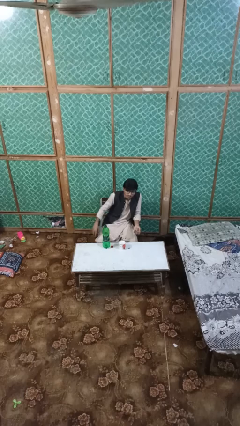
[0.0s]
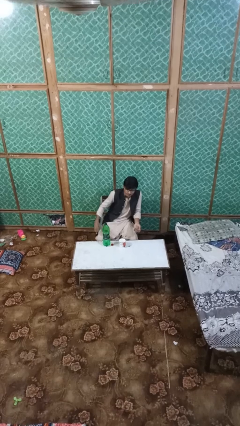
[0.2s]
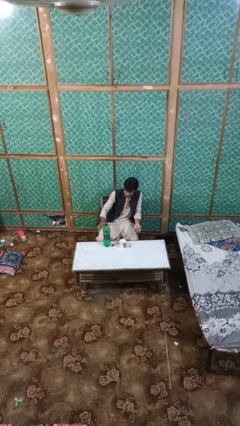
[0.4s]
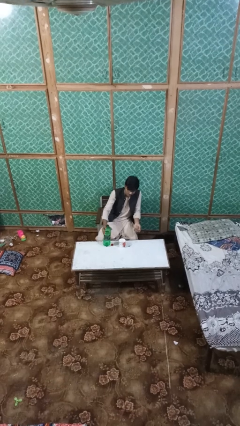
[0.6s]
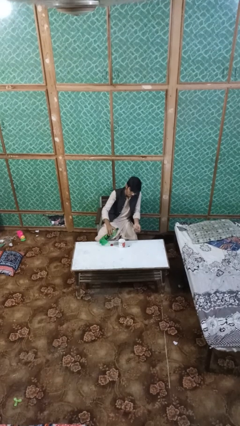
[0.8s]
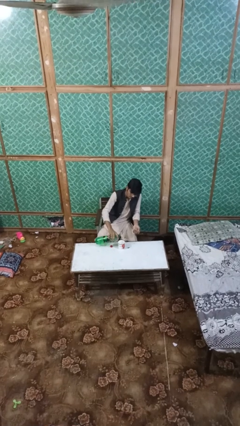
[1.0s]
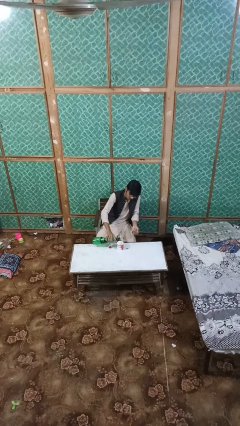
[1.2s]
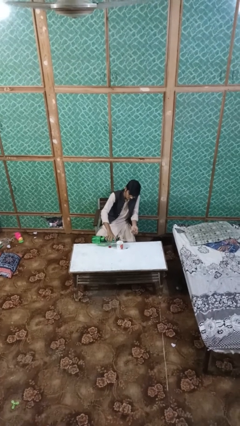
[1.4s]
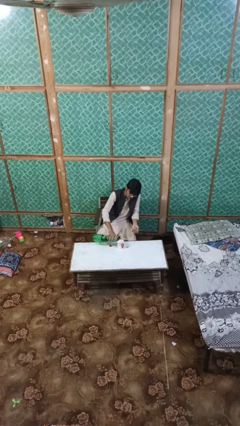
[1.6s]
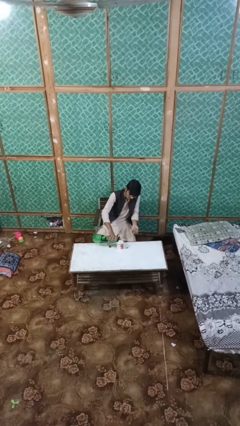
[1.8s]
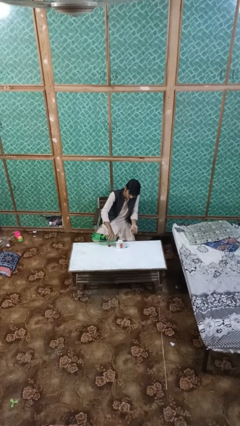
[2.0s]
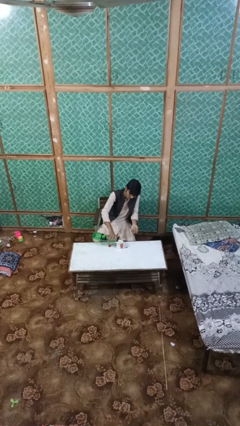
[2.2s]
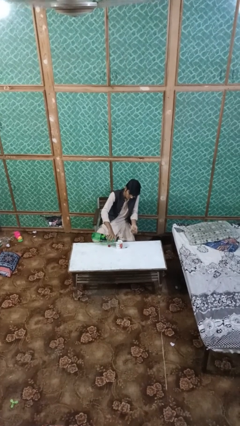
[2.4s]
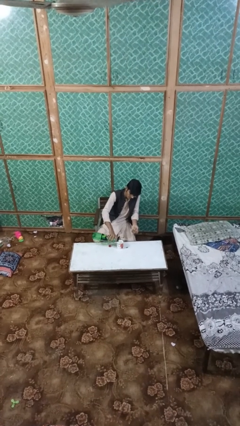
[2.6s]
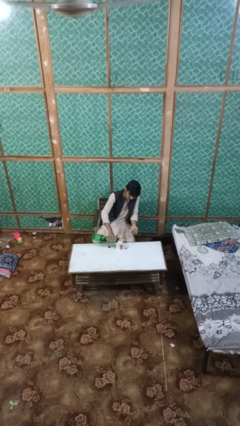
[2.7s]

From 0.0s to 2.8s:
person pours liquid into cup

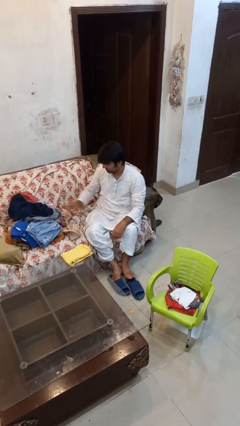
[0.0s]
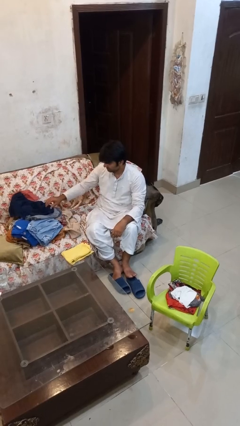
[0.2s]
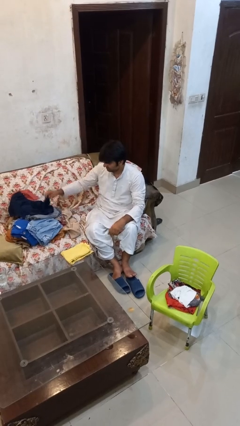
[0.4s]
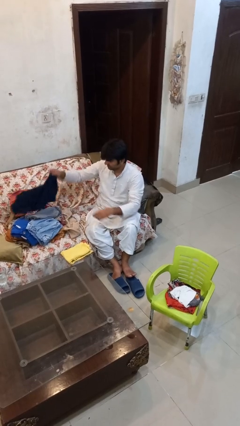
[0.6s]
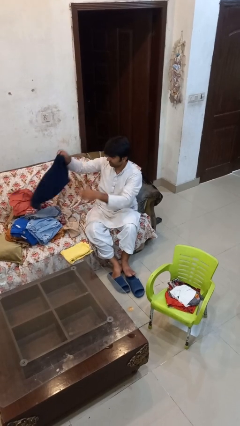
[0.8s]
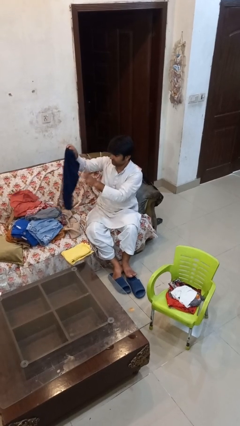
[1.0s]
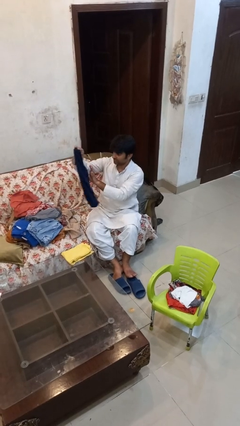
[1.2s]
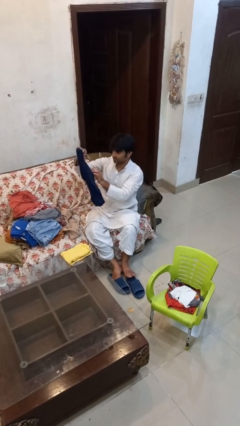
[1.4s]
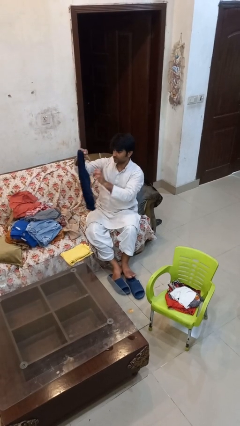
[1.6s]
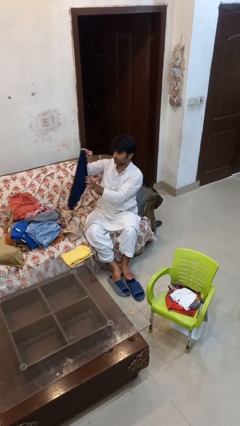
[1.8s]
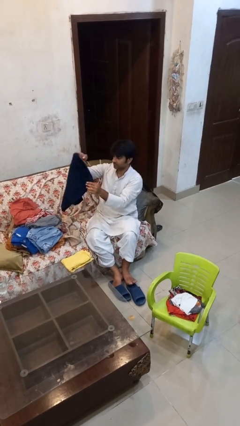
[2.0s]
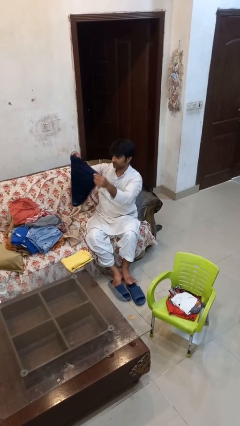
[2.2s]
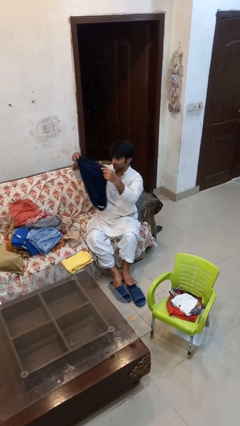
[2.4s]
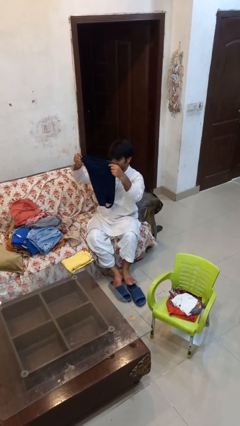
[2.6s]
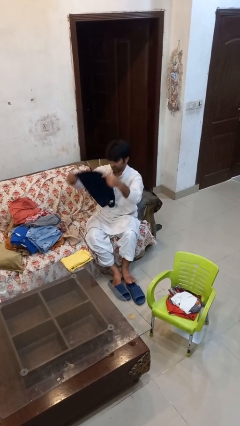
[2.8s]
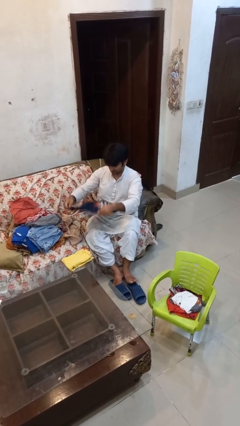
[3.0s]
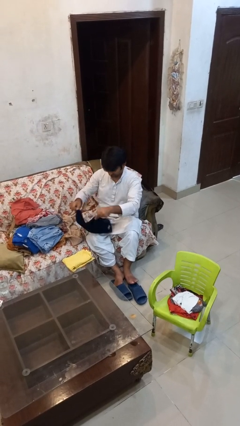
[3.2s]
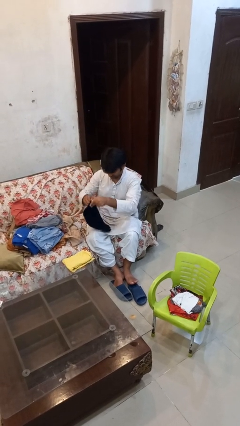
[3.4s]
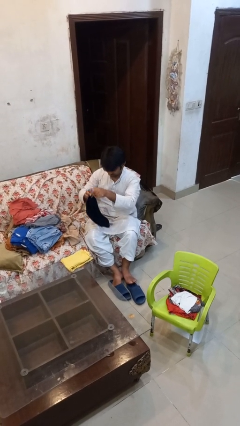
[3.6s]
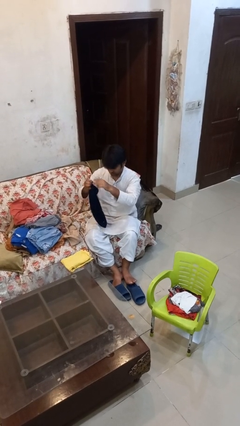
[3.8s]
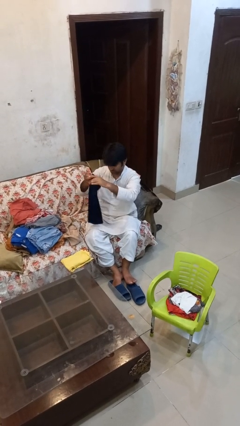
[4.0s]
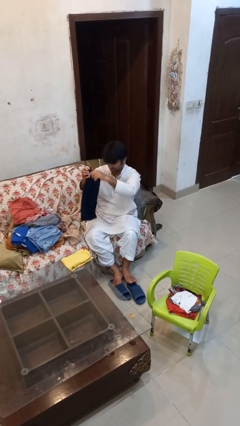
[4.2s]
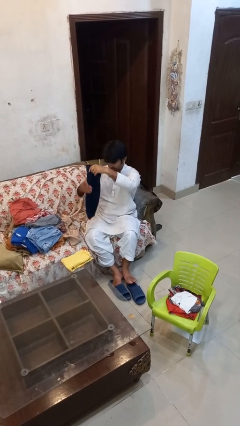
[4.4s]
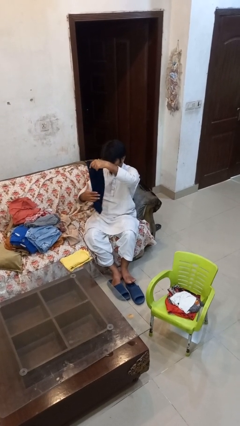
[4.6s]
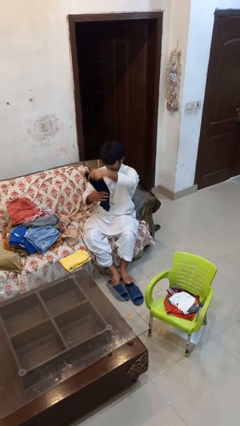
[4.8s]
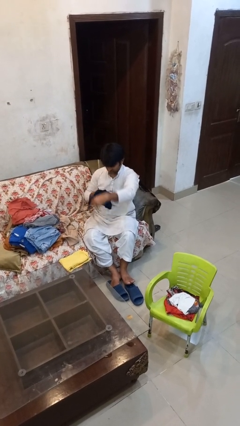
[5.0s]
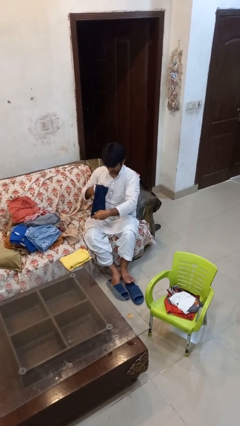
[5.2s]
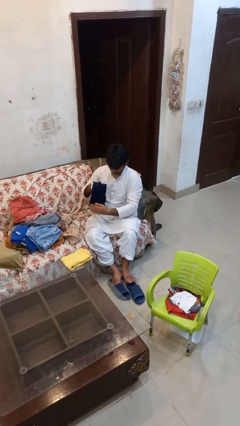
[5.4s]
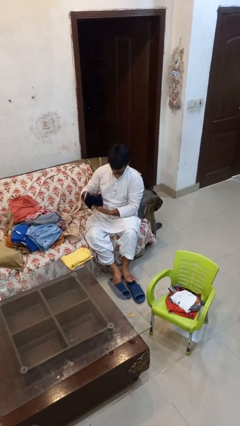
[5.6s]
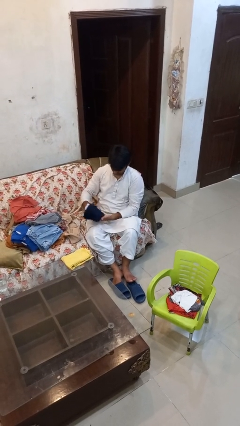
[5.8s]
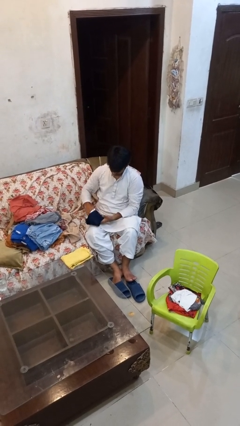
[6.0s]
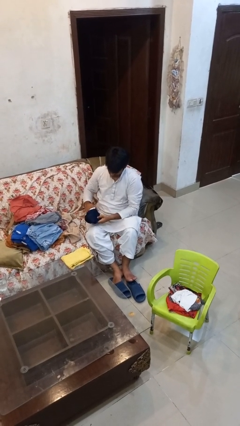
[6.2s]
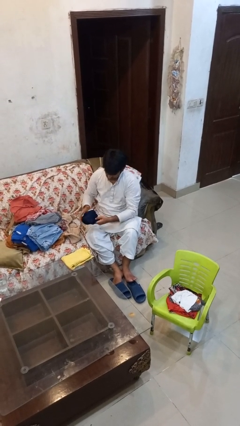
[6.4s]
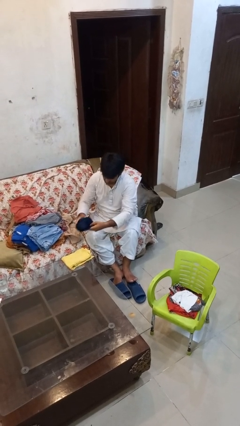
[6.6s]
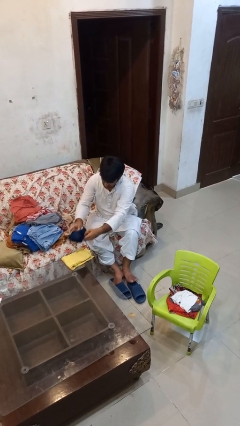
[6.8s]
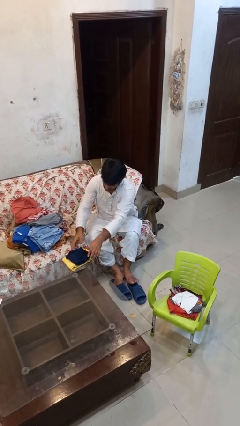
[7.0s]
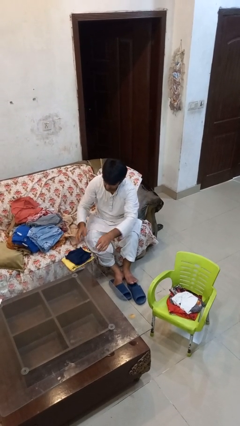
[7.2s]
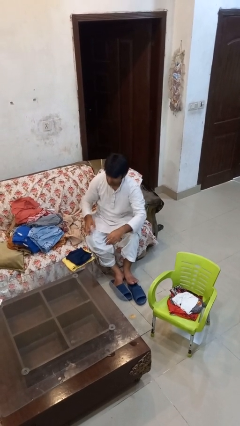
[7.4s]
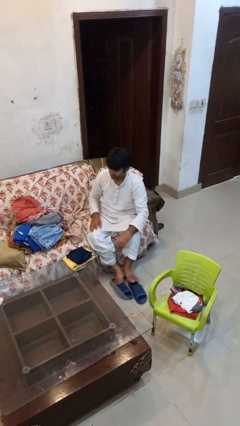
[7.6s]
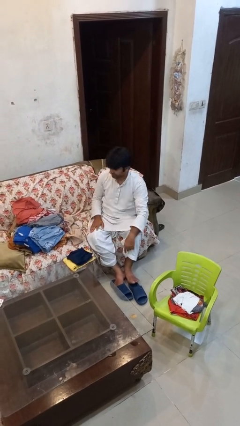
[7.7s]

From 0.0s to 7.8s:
person folds shirt

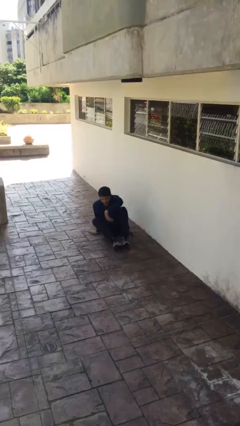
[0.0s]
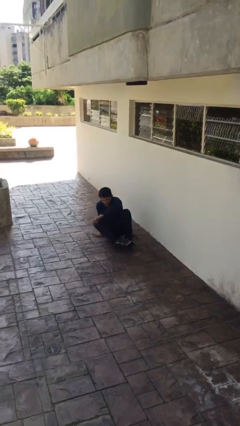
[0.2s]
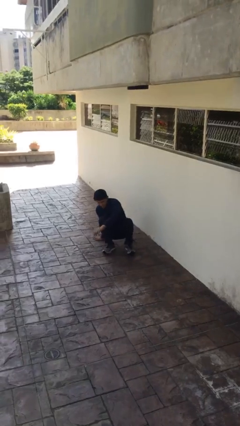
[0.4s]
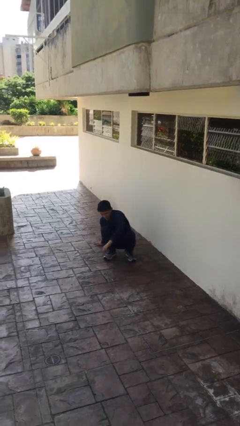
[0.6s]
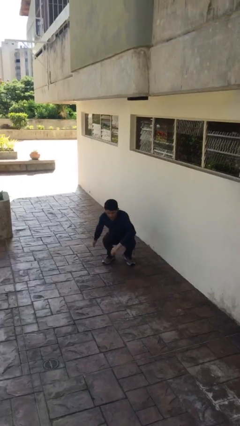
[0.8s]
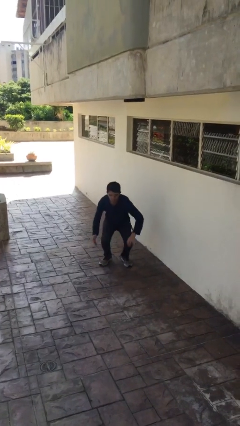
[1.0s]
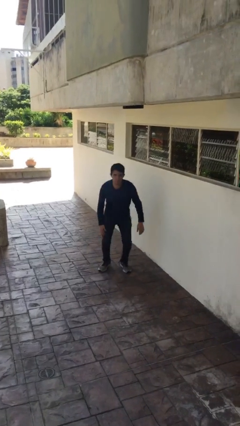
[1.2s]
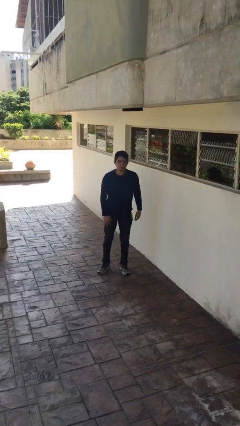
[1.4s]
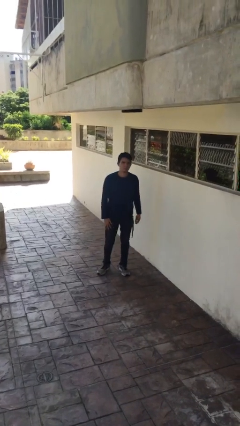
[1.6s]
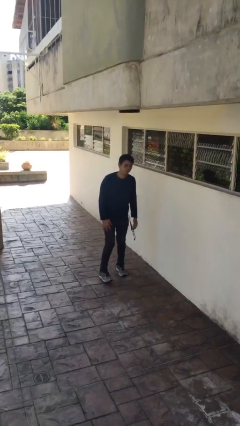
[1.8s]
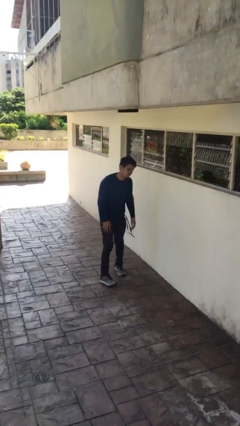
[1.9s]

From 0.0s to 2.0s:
person stands up

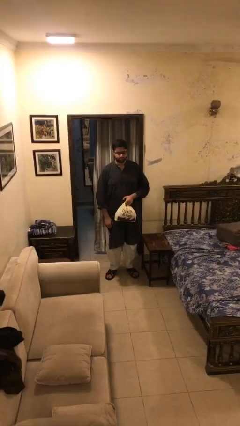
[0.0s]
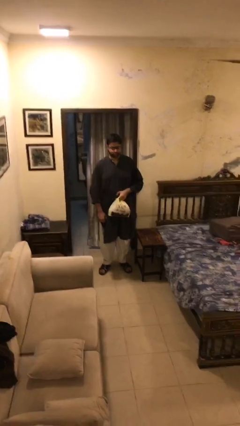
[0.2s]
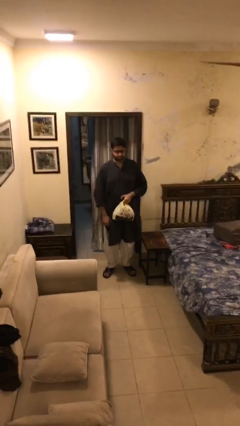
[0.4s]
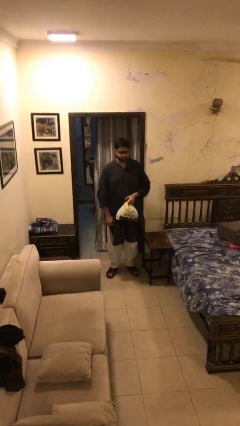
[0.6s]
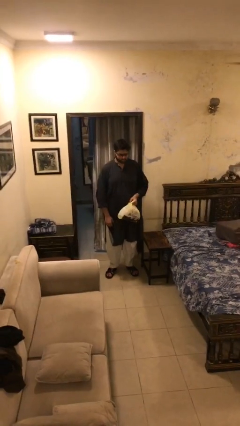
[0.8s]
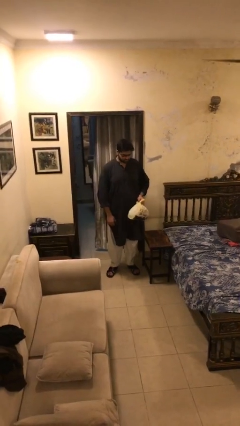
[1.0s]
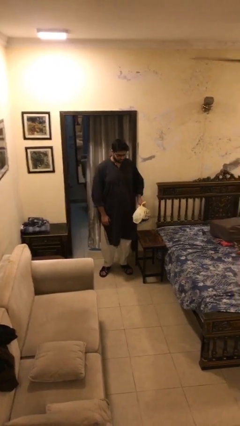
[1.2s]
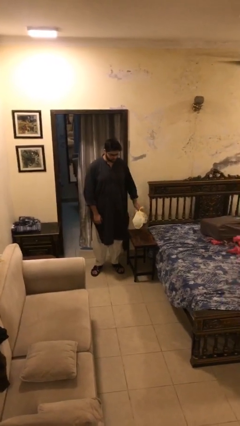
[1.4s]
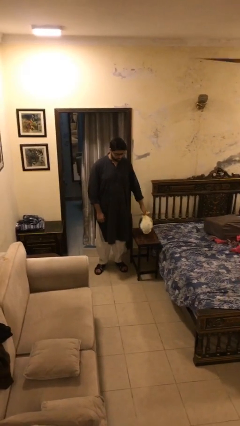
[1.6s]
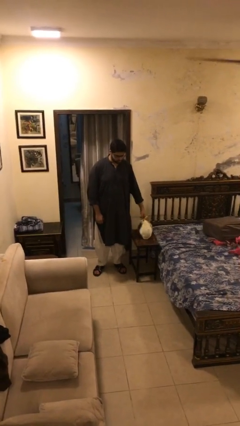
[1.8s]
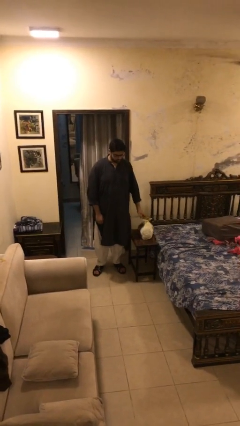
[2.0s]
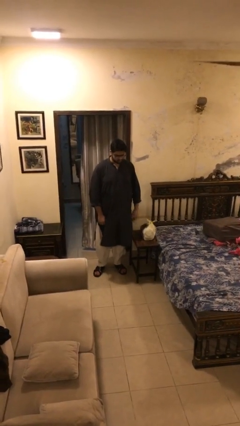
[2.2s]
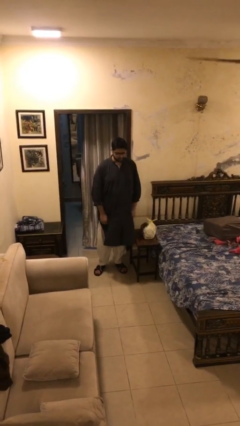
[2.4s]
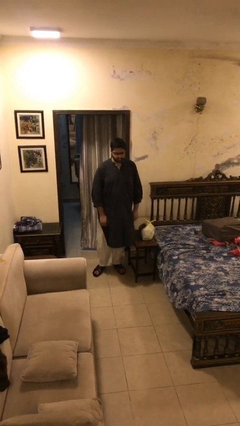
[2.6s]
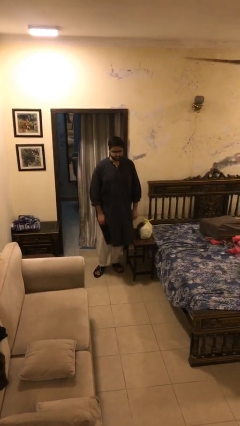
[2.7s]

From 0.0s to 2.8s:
person puts down object on table

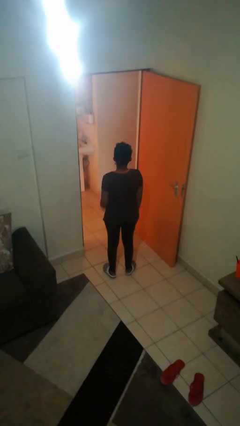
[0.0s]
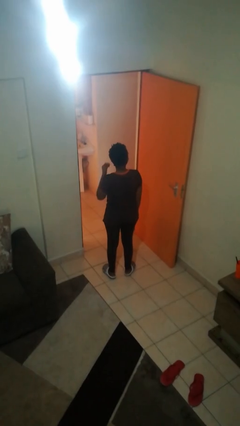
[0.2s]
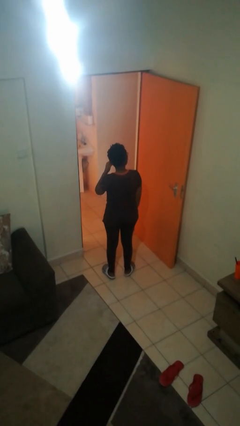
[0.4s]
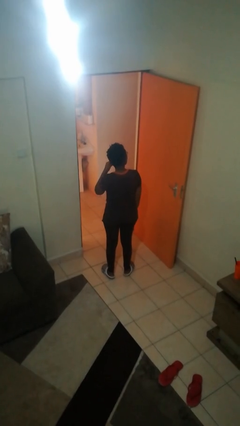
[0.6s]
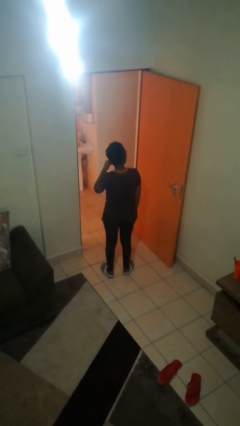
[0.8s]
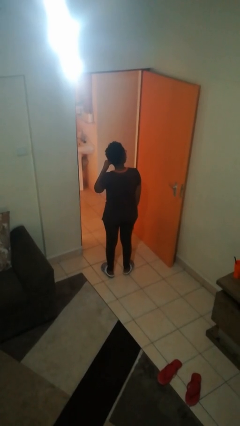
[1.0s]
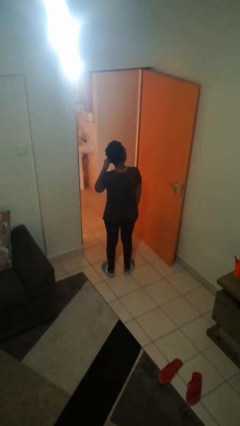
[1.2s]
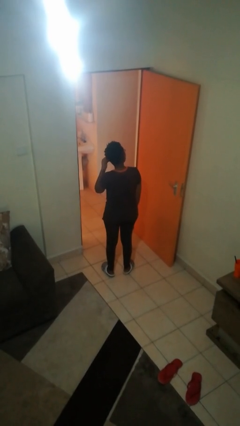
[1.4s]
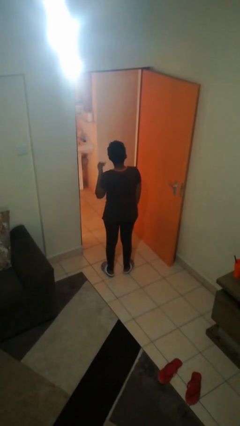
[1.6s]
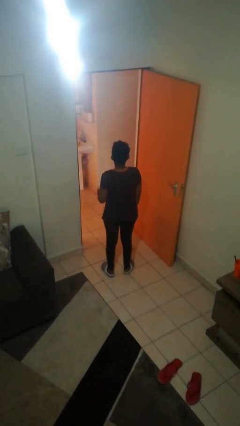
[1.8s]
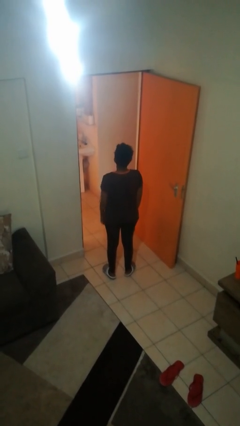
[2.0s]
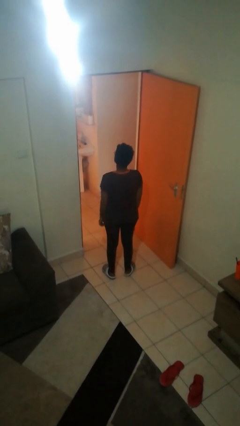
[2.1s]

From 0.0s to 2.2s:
person takes off earrings
